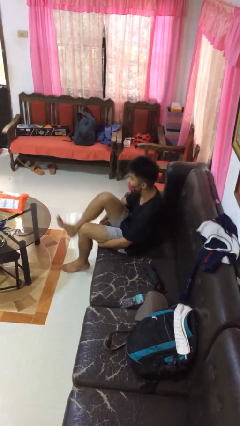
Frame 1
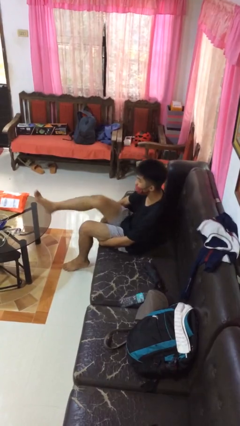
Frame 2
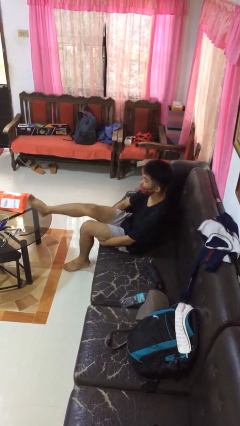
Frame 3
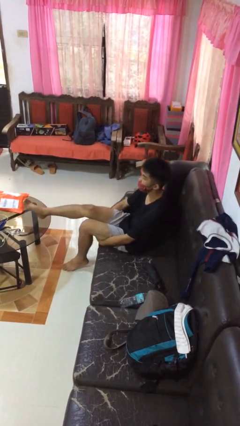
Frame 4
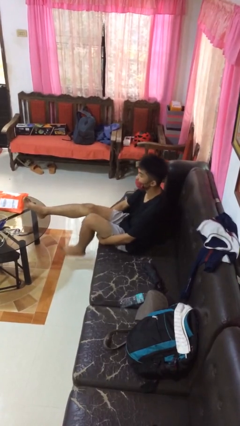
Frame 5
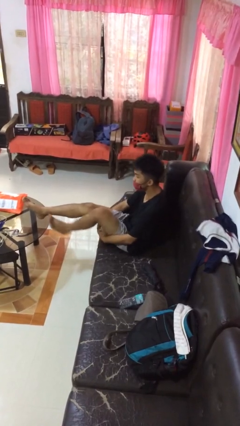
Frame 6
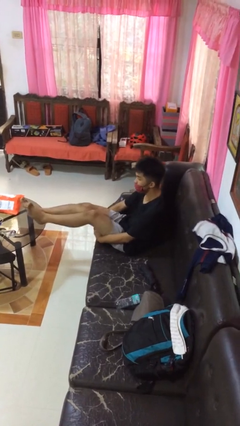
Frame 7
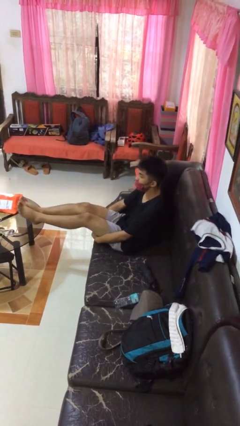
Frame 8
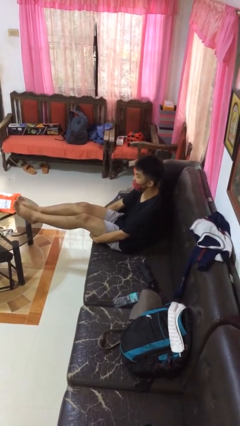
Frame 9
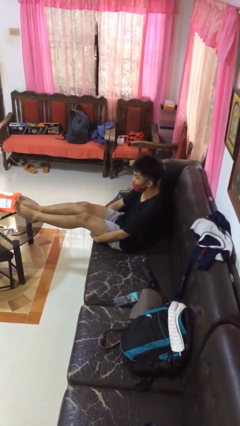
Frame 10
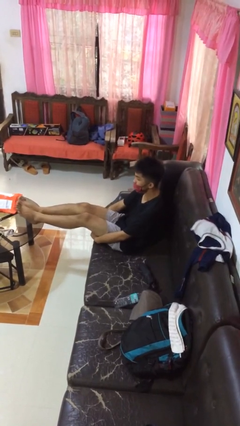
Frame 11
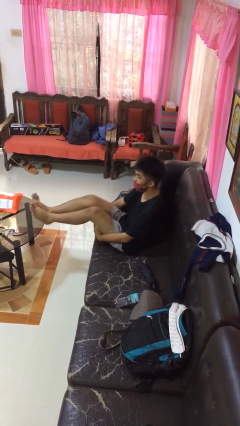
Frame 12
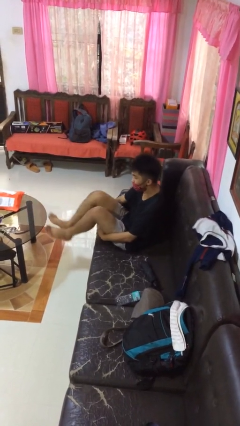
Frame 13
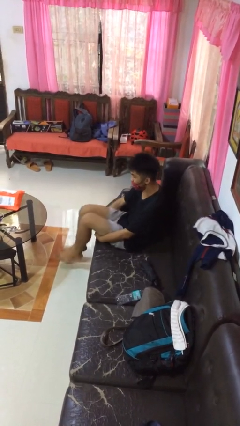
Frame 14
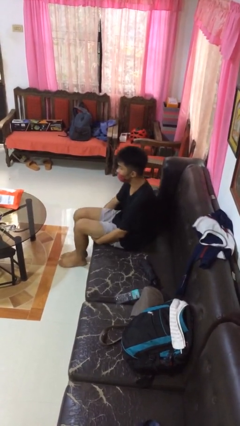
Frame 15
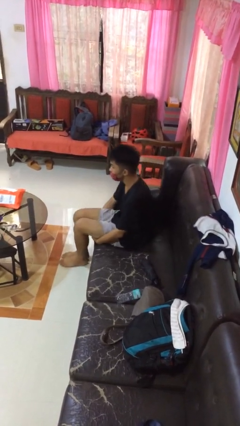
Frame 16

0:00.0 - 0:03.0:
person puts feet up

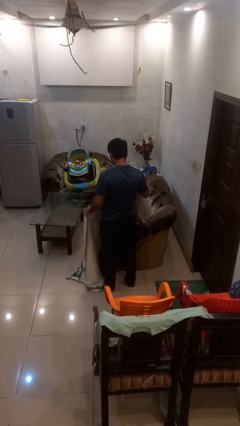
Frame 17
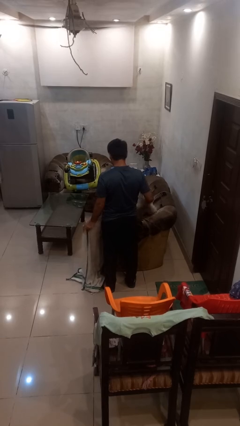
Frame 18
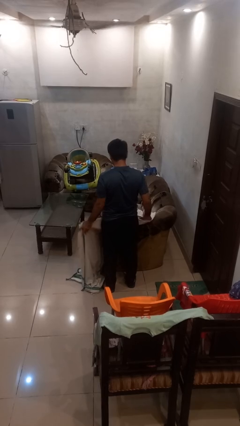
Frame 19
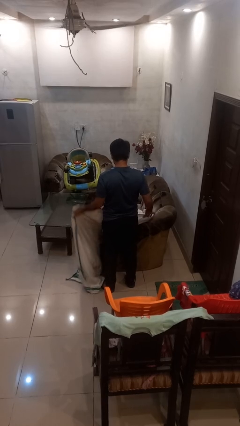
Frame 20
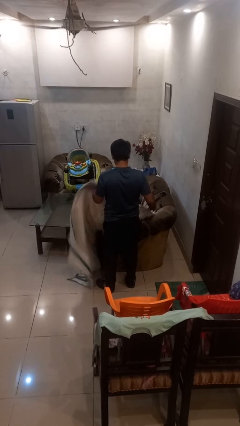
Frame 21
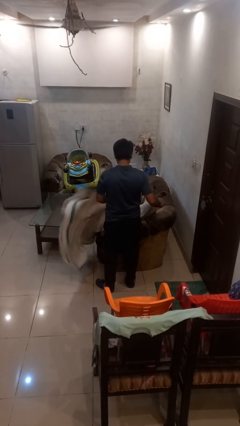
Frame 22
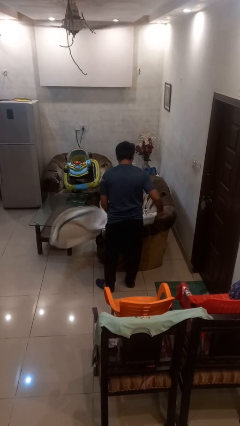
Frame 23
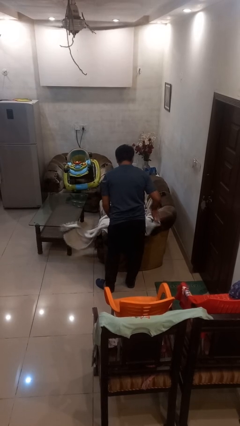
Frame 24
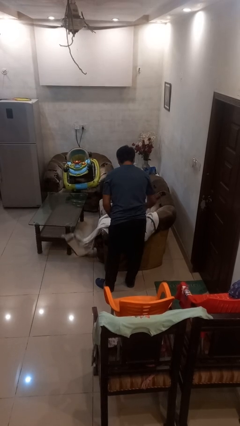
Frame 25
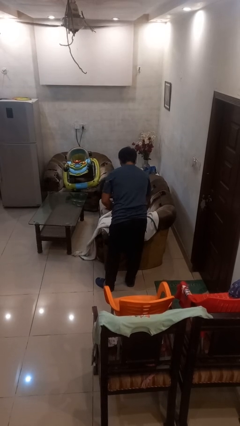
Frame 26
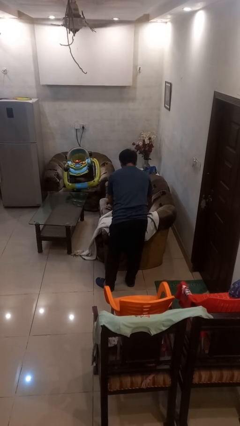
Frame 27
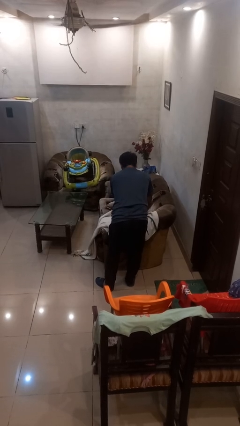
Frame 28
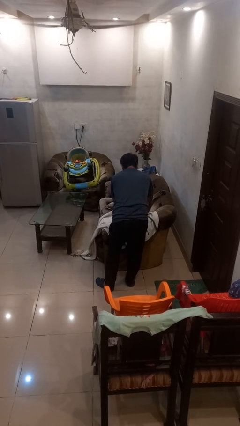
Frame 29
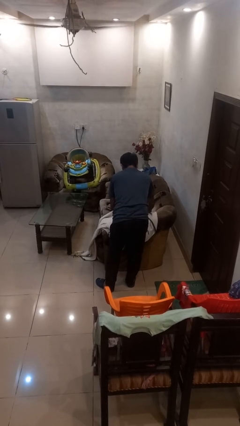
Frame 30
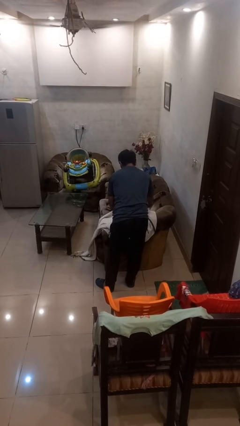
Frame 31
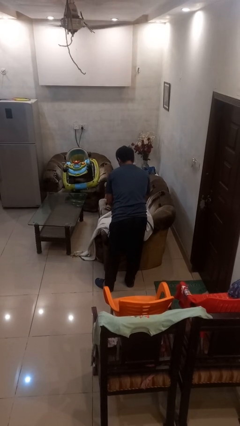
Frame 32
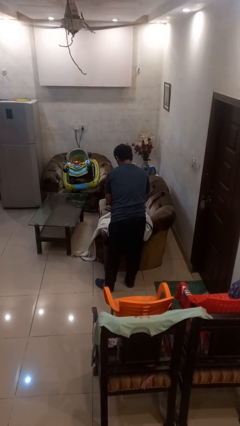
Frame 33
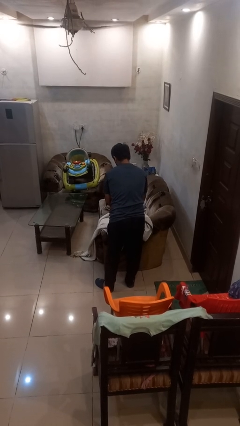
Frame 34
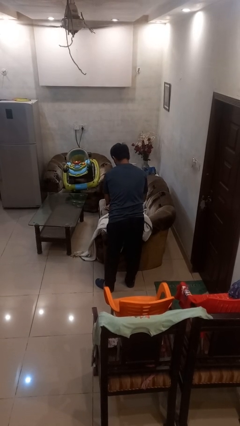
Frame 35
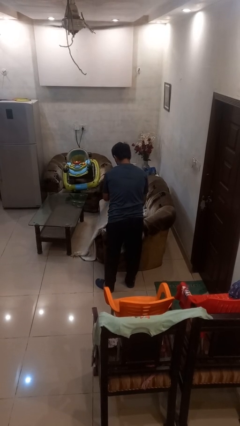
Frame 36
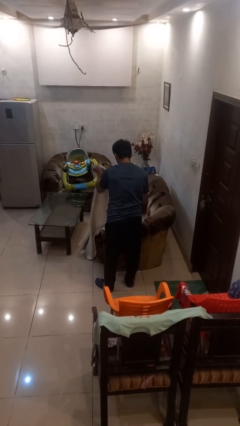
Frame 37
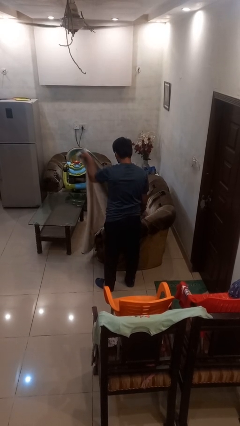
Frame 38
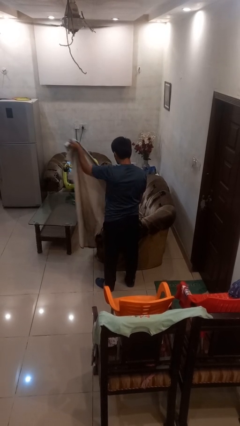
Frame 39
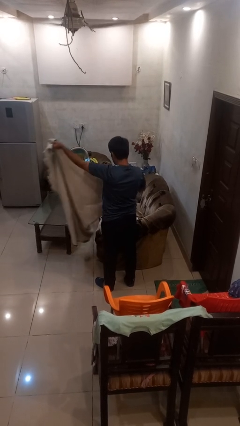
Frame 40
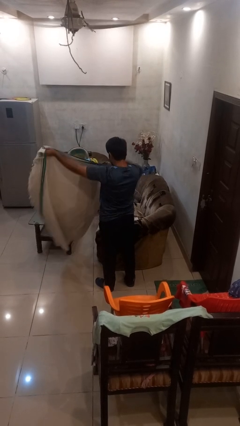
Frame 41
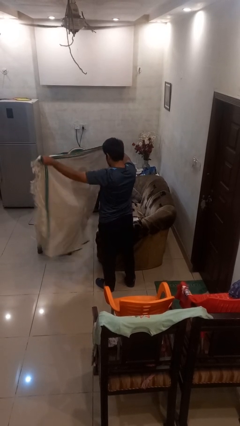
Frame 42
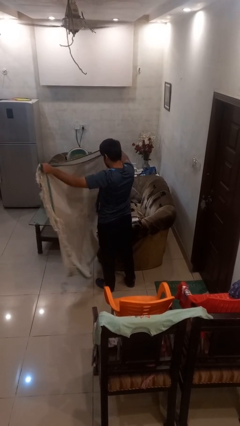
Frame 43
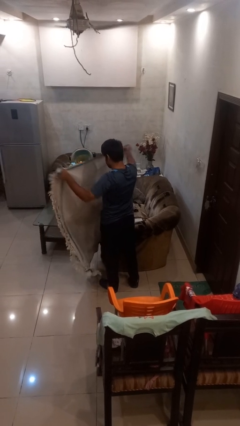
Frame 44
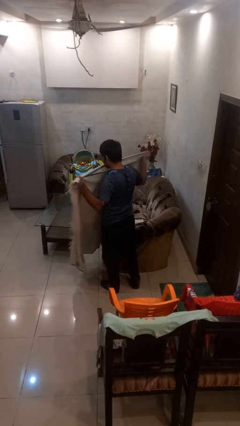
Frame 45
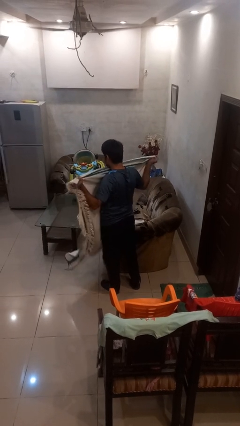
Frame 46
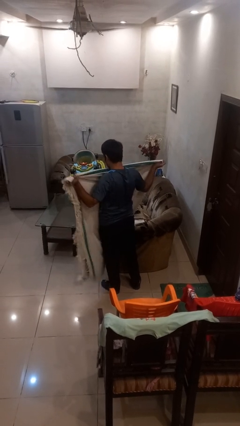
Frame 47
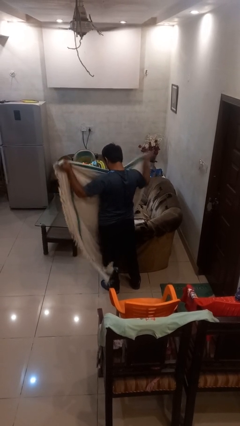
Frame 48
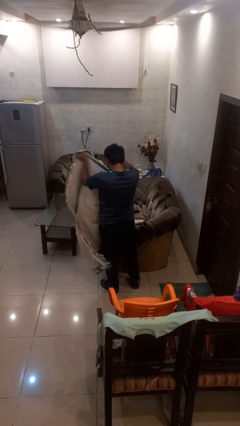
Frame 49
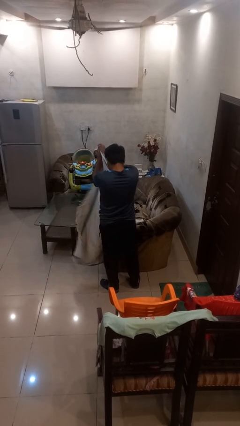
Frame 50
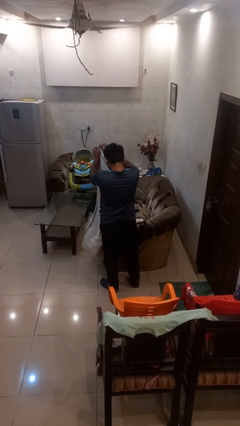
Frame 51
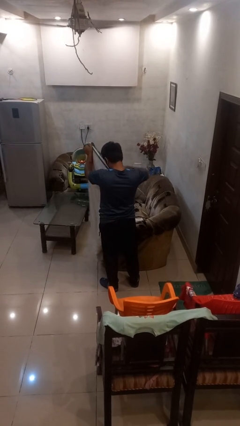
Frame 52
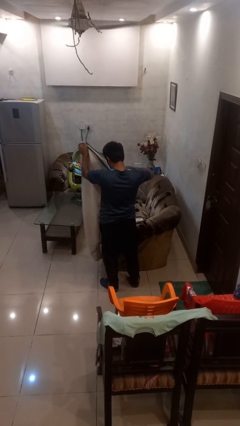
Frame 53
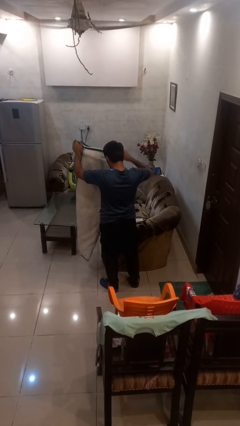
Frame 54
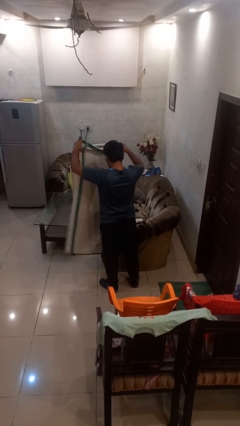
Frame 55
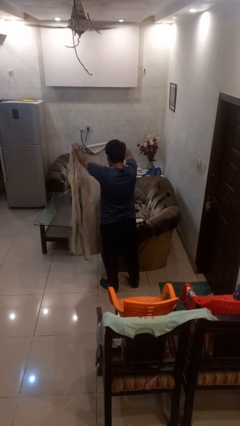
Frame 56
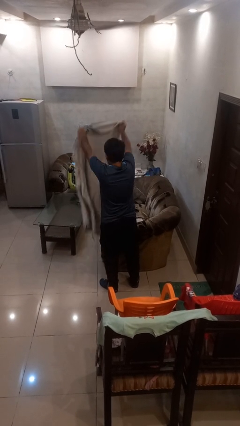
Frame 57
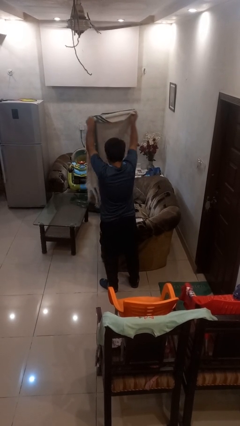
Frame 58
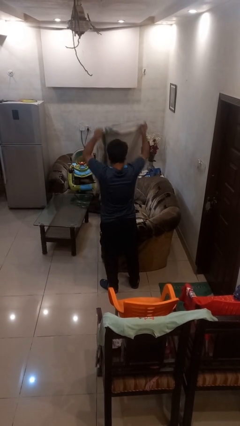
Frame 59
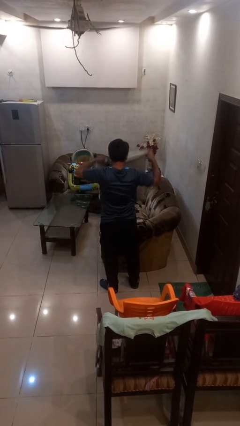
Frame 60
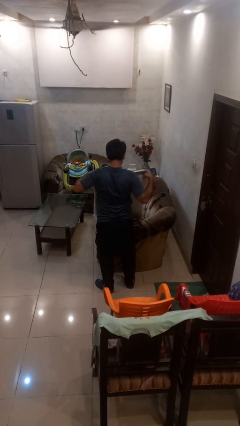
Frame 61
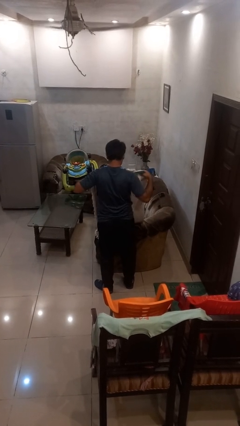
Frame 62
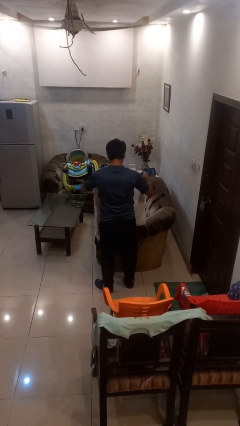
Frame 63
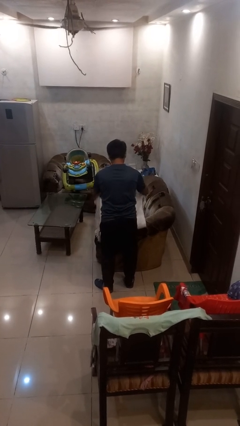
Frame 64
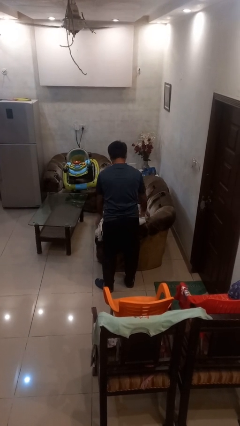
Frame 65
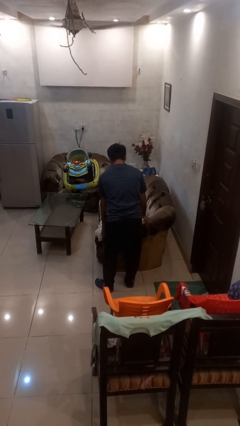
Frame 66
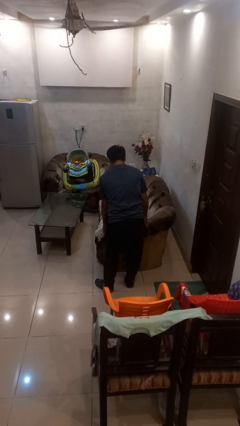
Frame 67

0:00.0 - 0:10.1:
person folds blanket

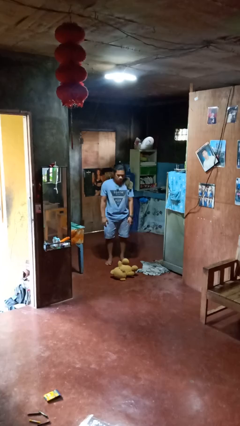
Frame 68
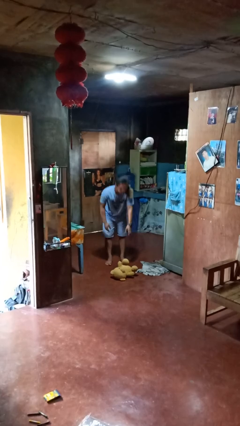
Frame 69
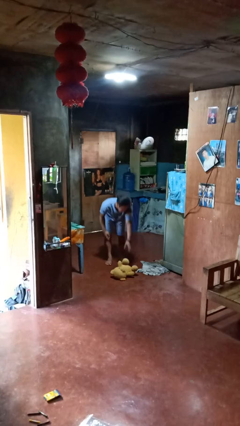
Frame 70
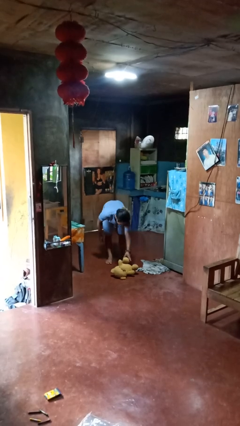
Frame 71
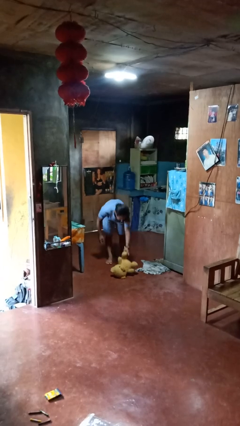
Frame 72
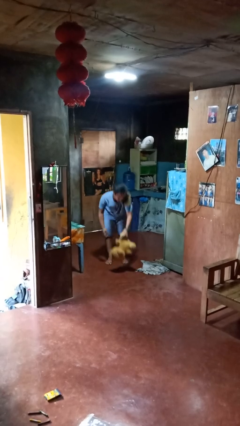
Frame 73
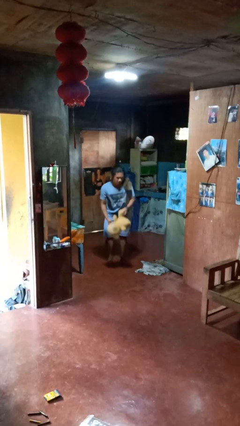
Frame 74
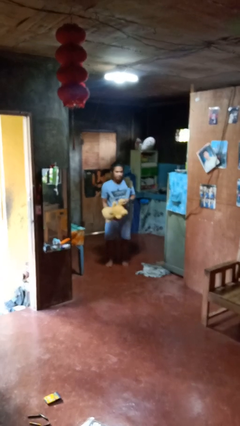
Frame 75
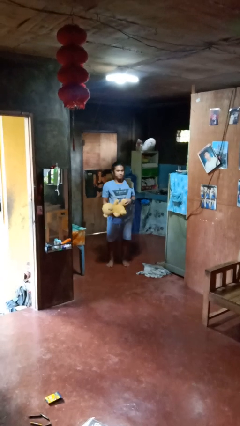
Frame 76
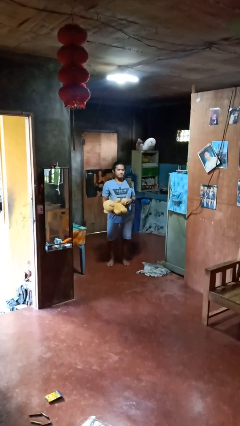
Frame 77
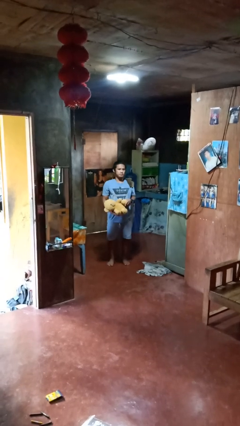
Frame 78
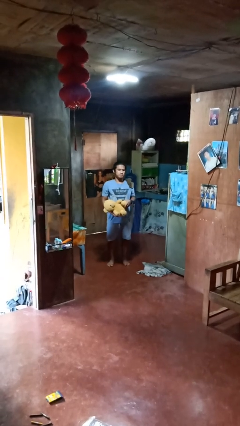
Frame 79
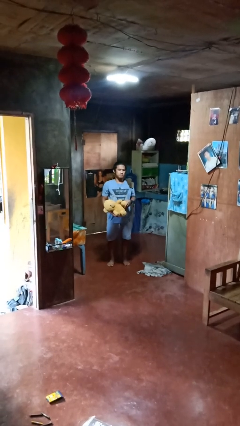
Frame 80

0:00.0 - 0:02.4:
person picks up object from floor

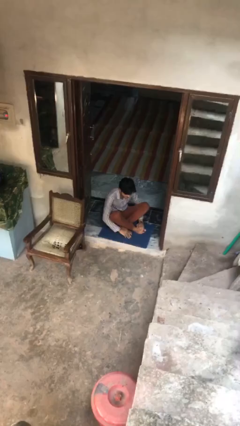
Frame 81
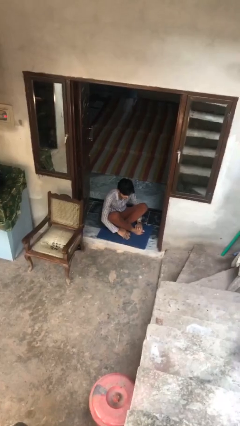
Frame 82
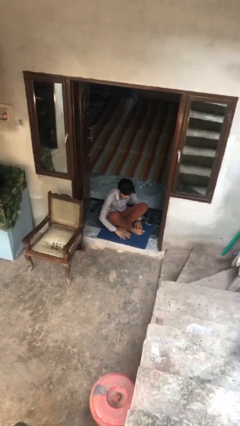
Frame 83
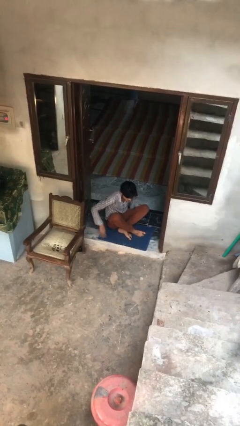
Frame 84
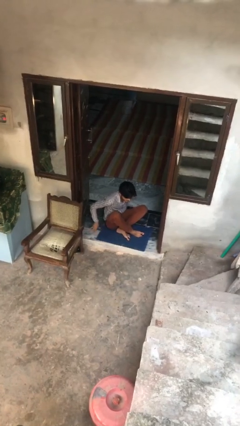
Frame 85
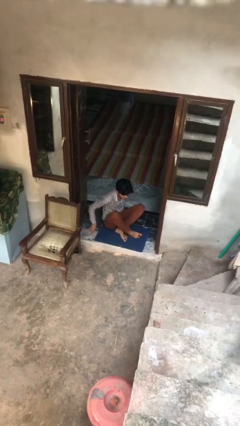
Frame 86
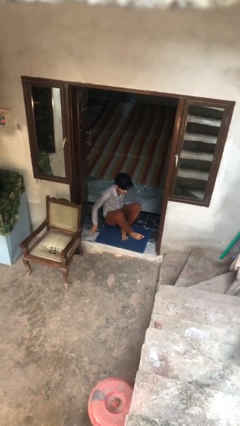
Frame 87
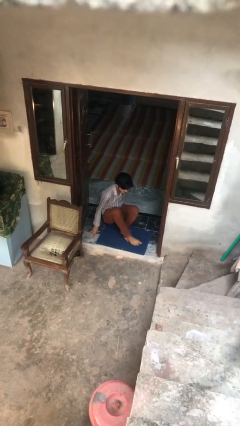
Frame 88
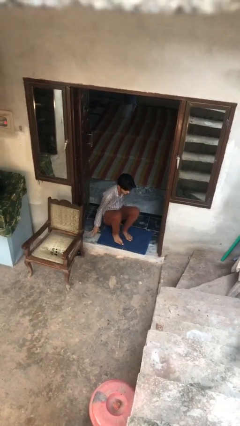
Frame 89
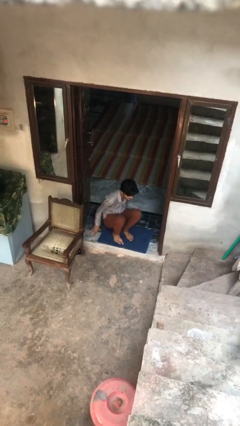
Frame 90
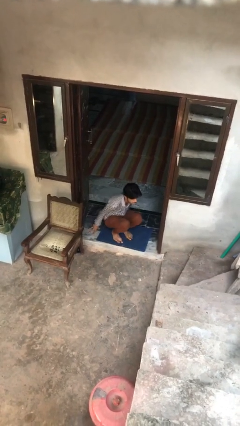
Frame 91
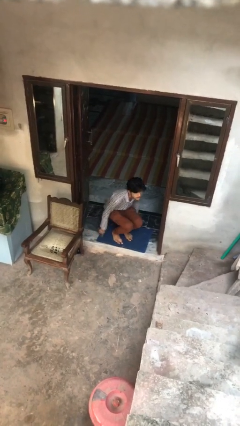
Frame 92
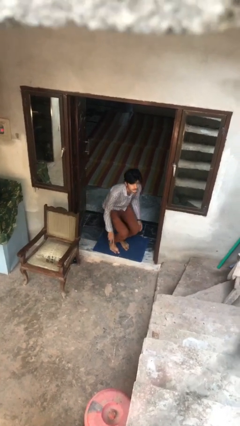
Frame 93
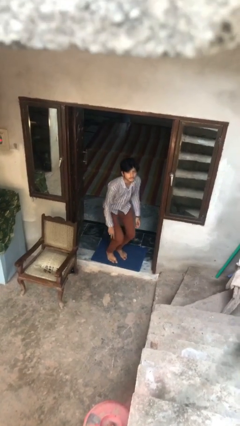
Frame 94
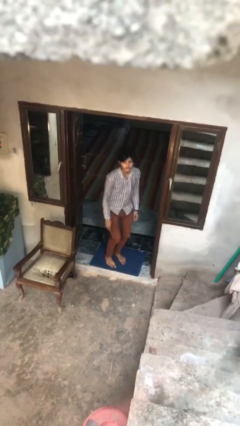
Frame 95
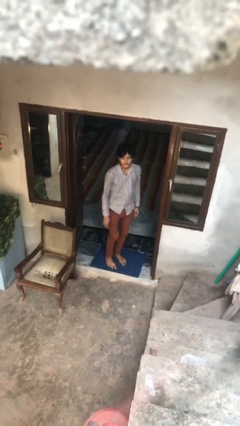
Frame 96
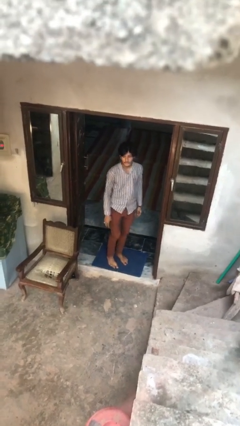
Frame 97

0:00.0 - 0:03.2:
person stands up from floor
